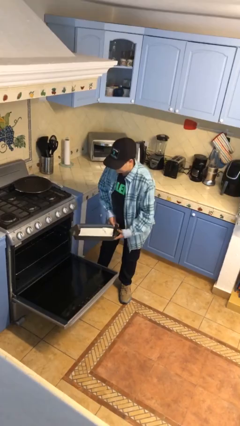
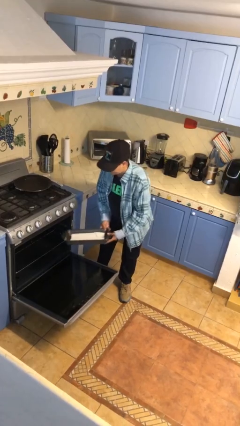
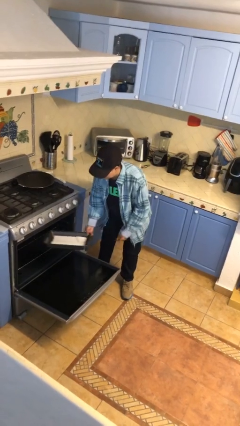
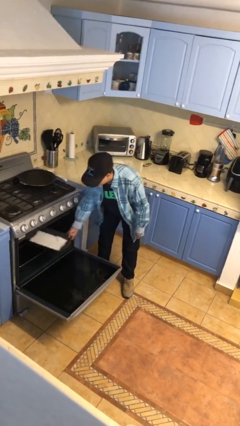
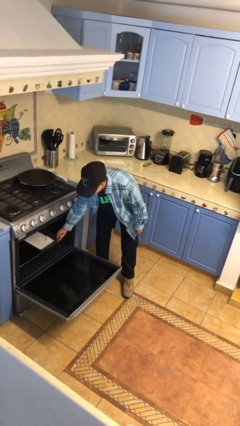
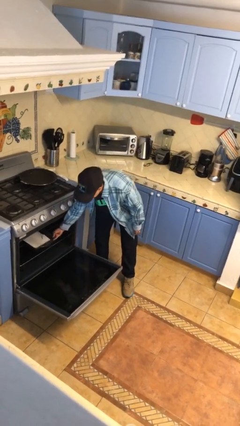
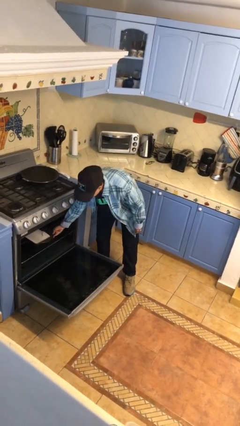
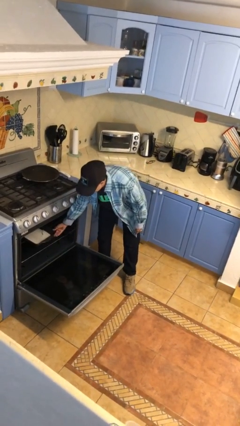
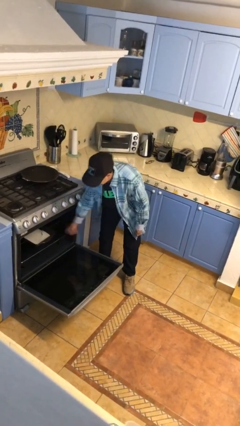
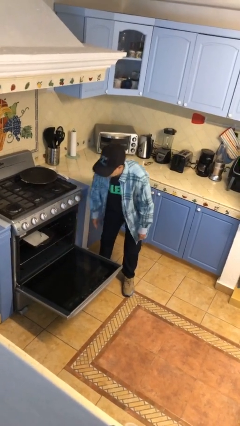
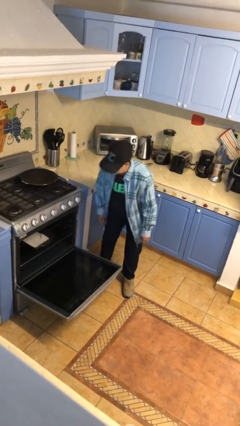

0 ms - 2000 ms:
person puts object into oven

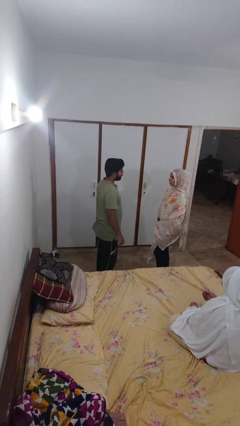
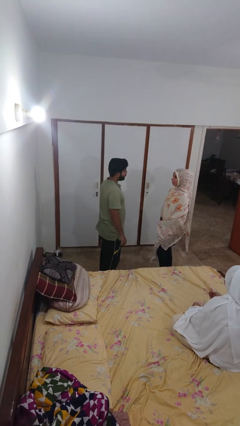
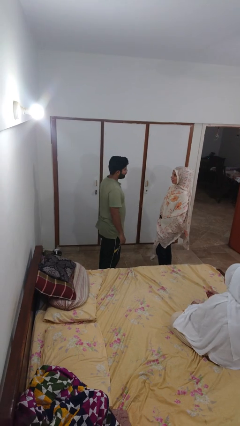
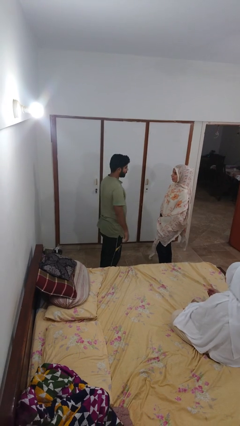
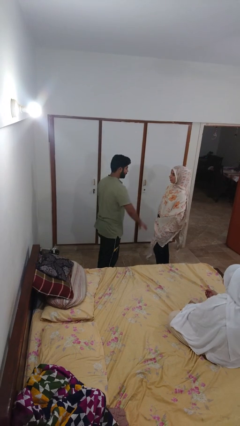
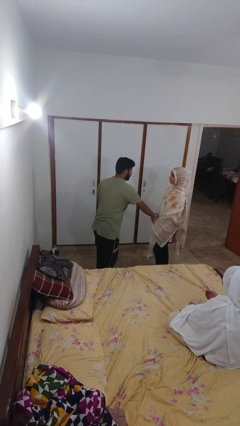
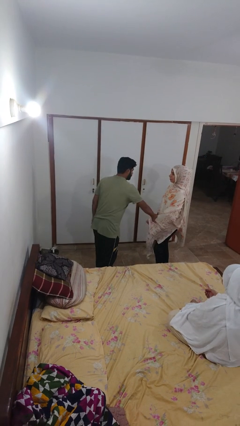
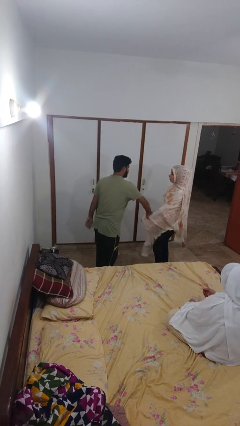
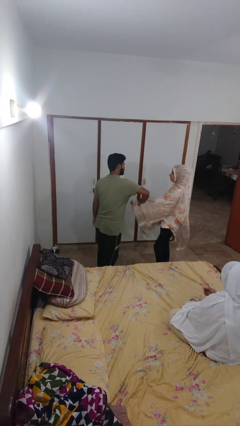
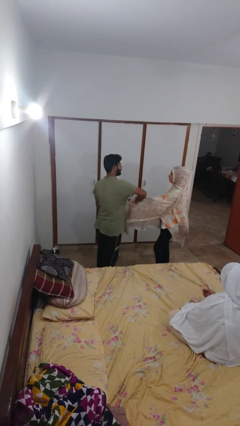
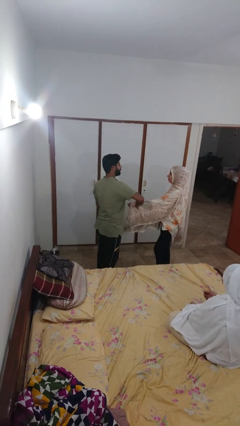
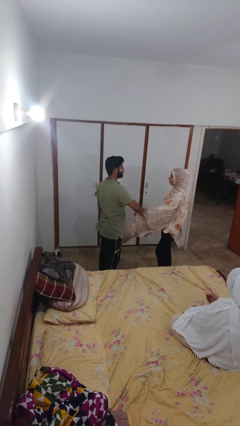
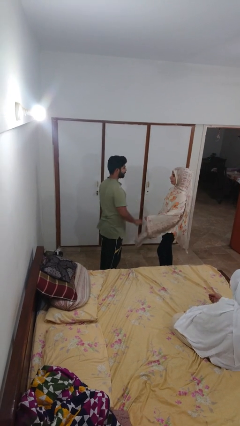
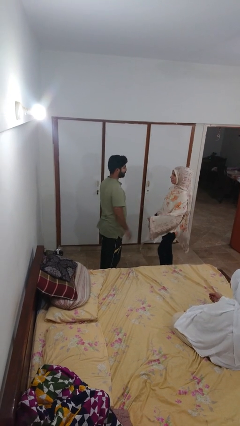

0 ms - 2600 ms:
person grabs person by forearm

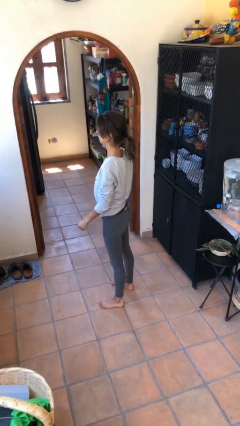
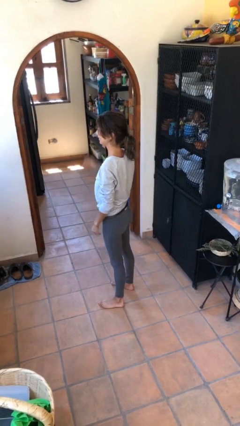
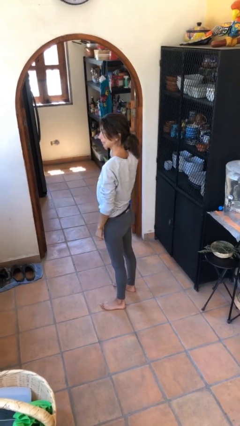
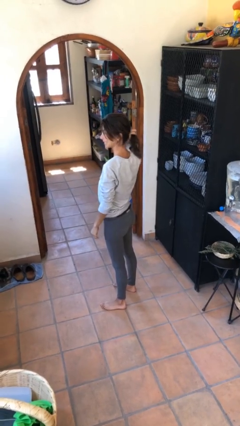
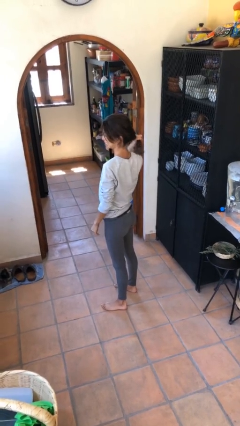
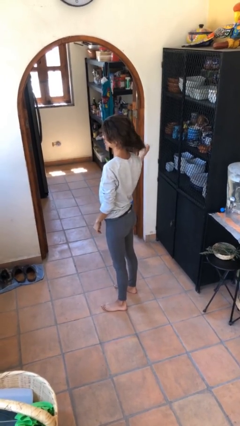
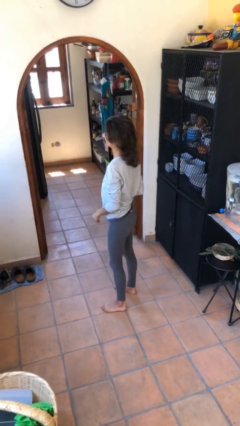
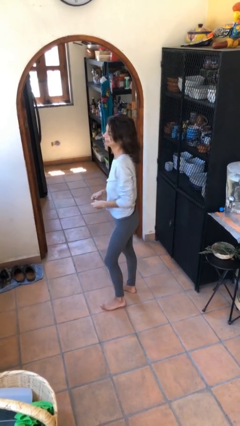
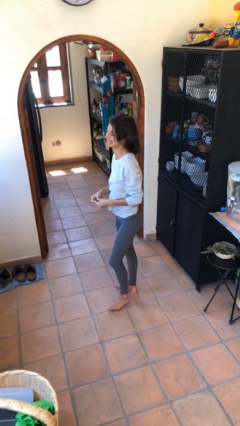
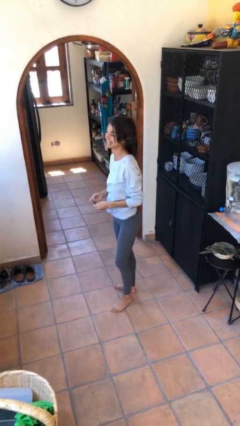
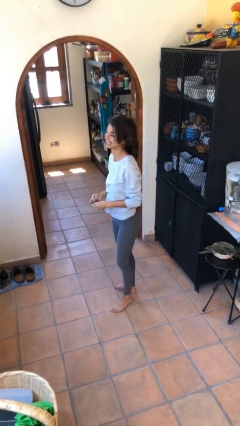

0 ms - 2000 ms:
person takes off hairtie

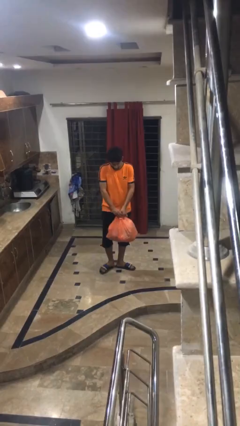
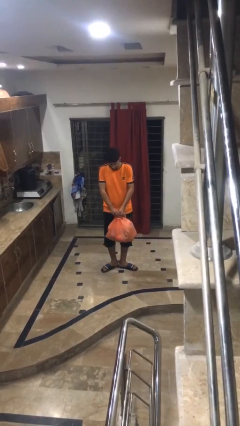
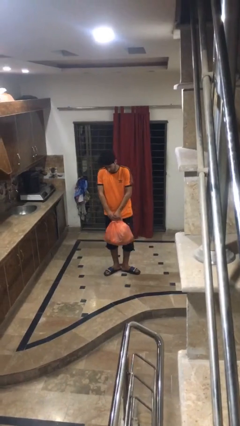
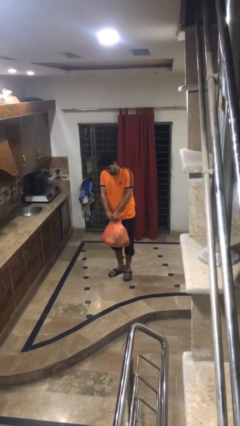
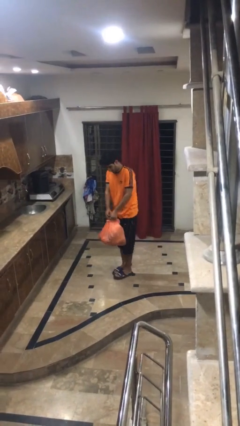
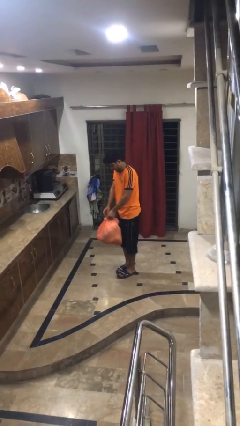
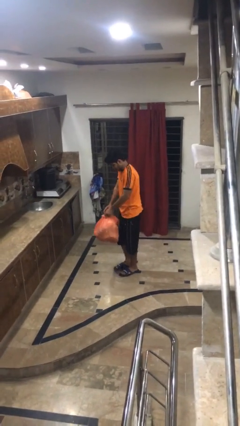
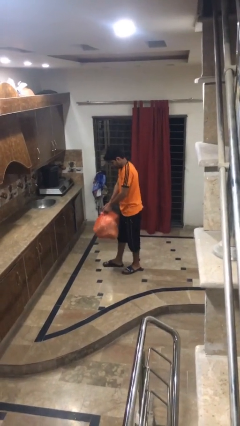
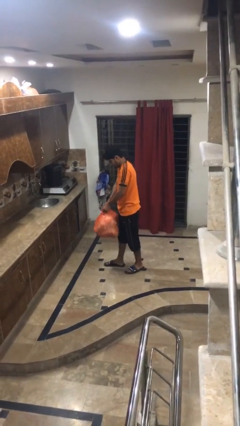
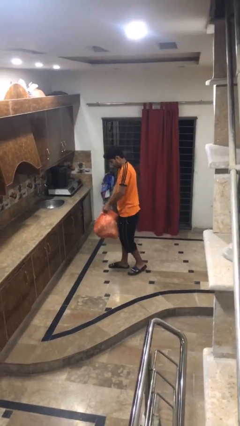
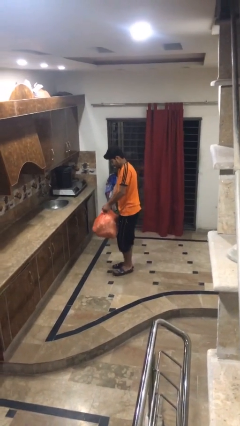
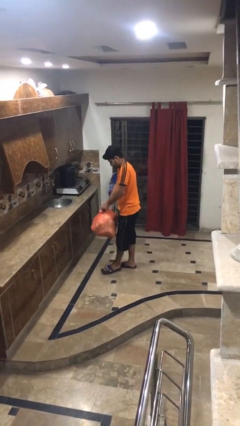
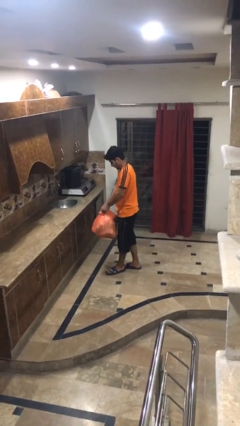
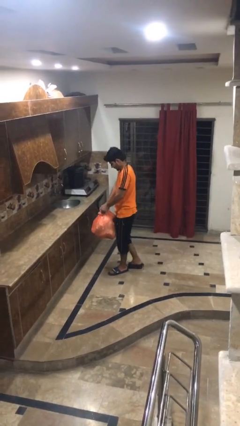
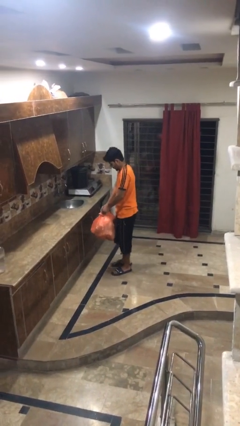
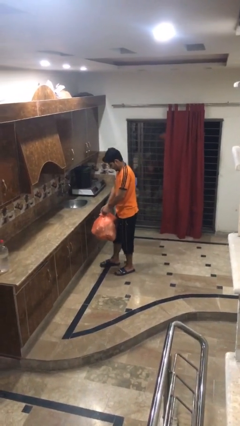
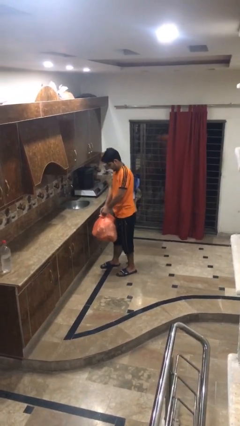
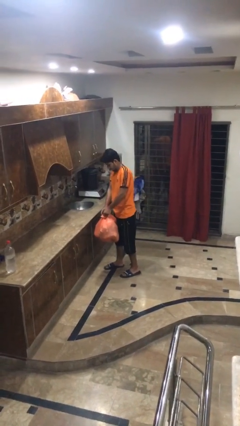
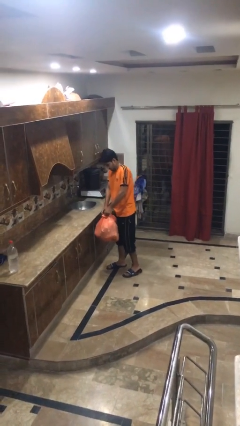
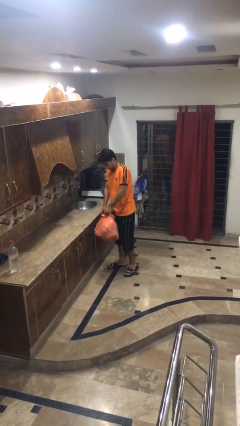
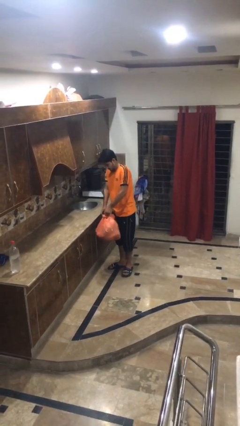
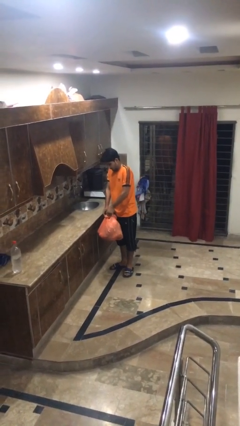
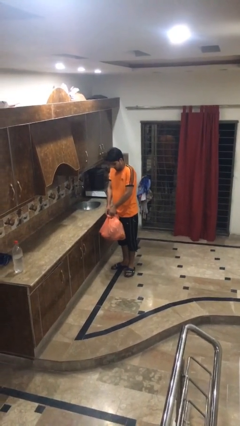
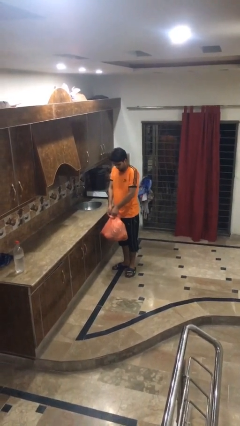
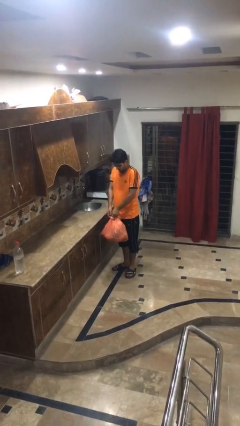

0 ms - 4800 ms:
person carries groceries

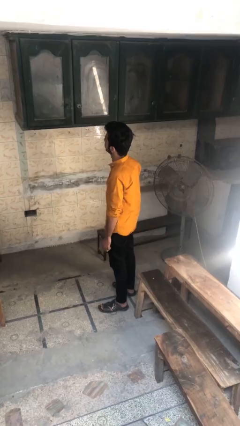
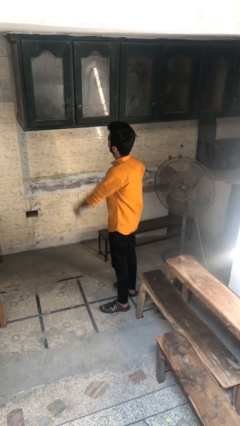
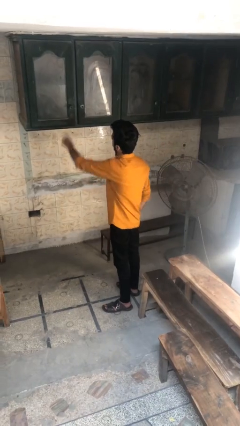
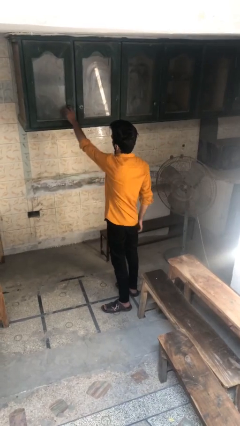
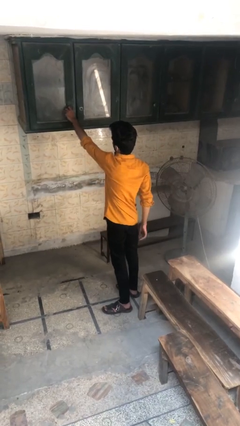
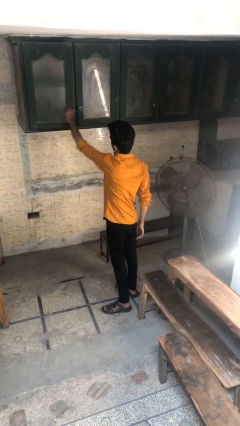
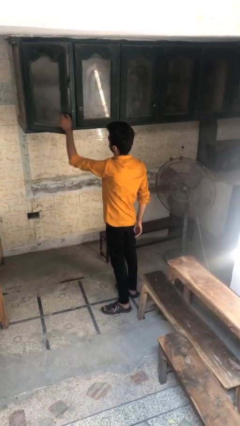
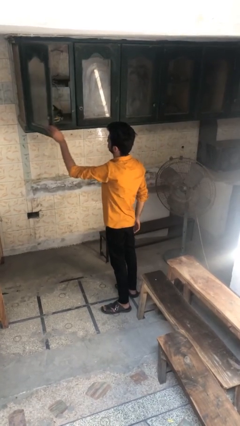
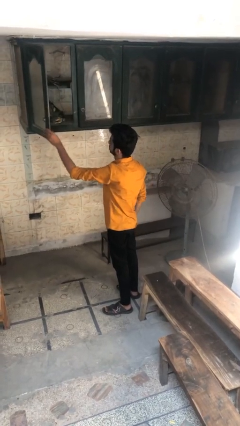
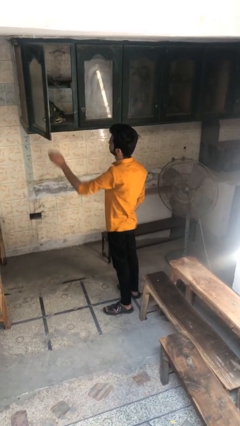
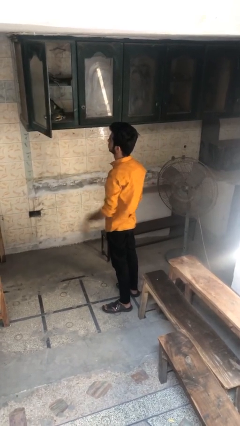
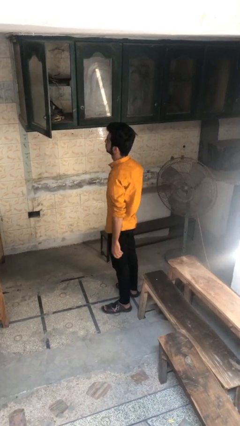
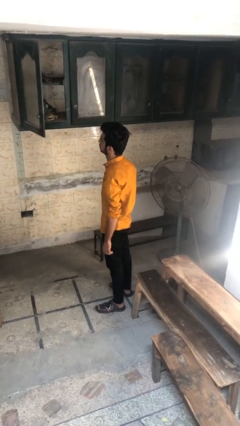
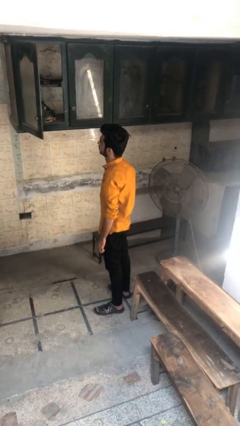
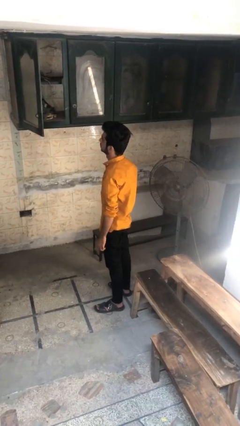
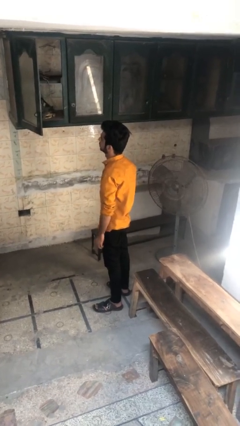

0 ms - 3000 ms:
person opens cabinet

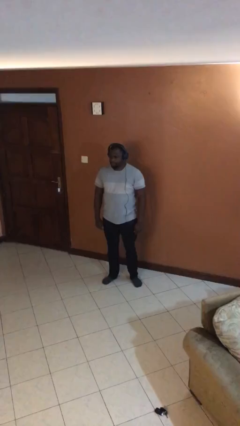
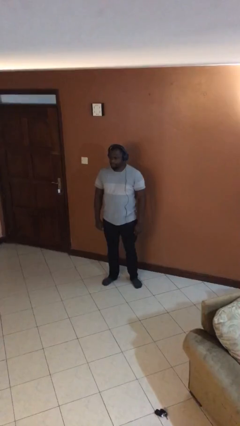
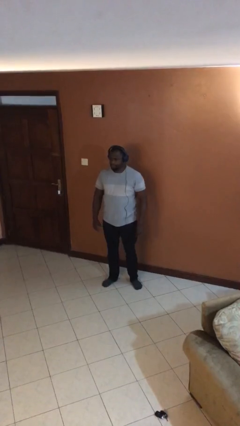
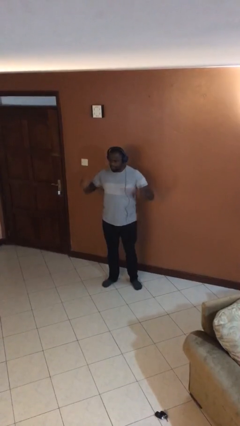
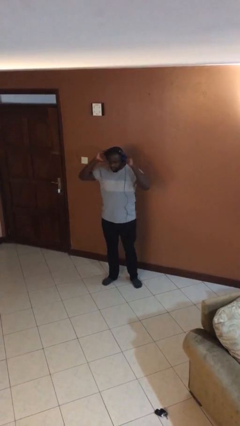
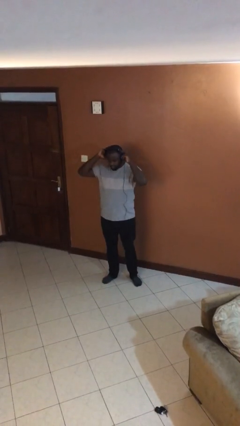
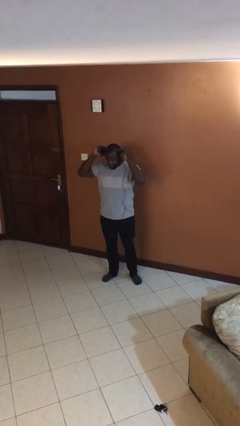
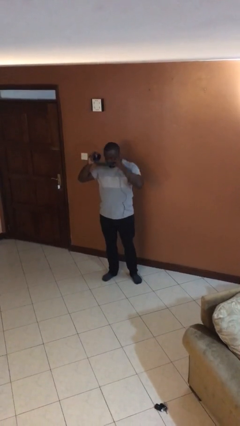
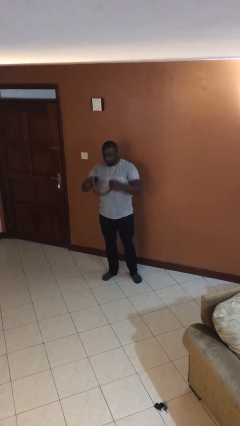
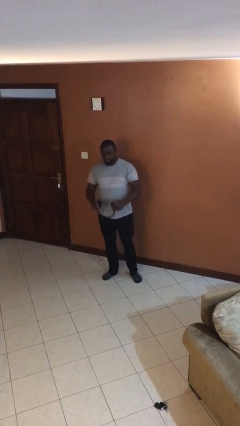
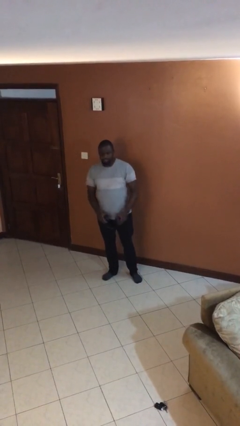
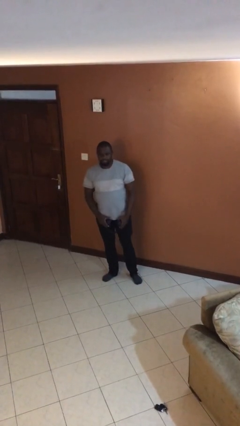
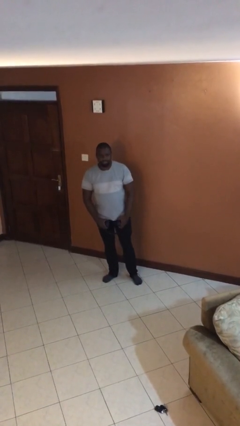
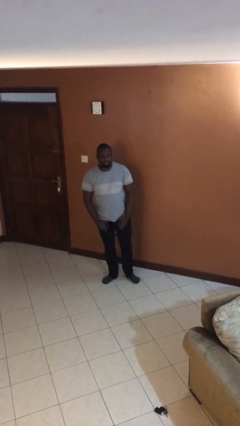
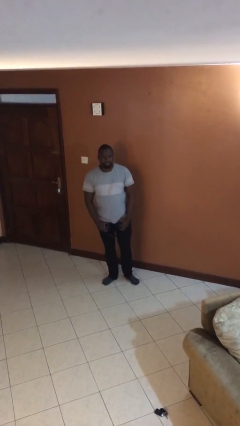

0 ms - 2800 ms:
person takes off headphones
